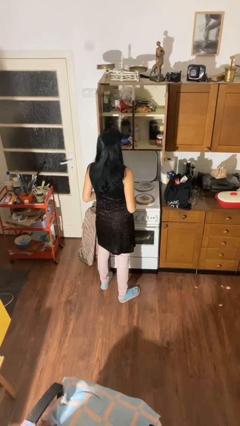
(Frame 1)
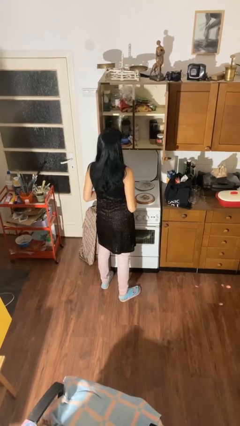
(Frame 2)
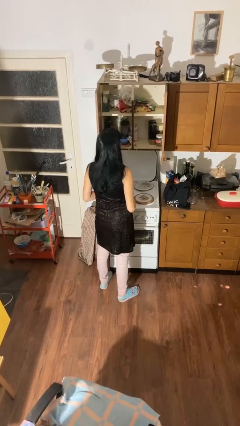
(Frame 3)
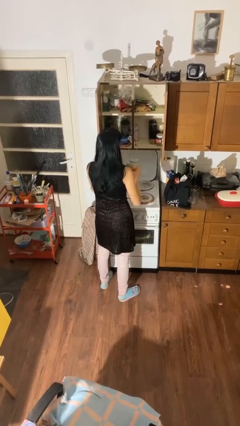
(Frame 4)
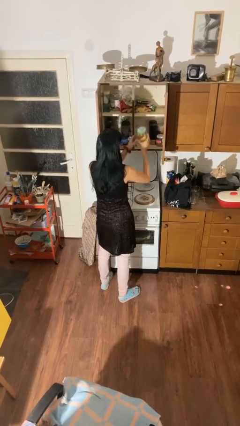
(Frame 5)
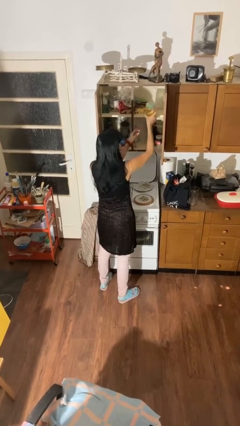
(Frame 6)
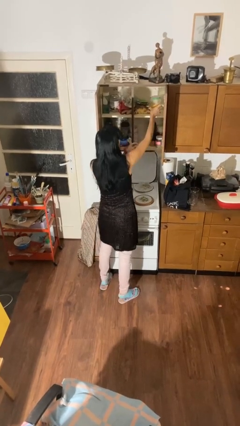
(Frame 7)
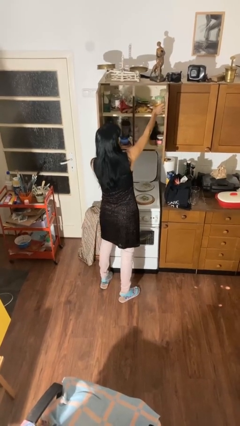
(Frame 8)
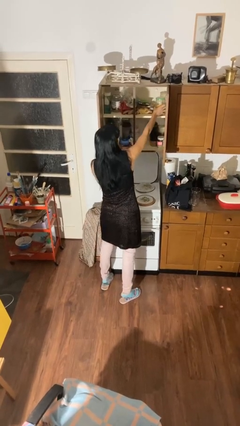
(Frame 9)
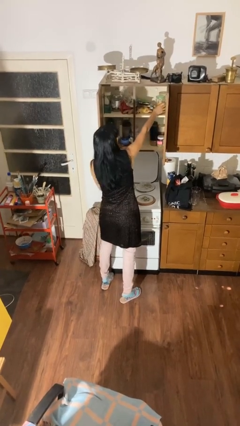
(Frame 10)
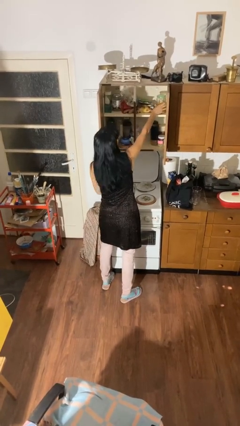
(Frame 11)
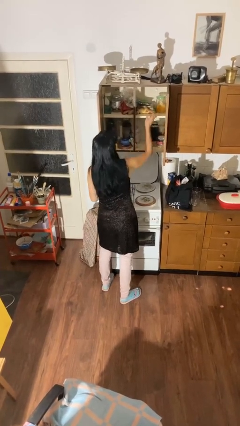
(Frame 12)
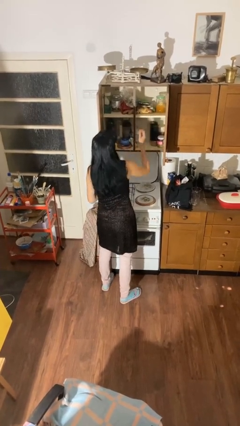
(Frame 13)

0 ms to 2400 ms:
person puts down object into cabinet

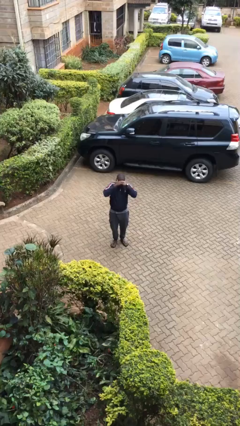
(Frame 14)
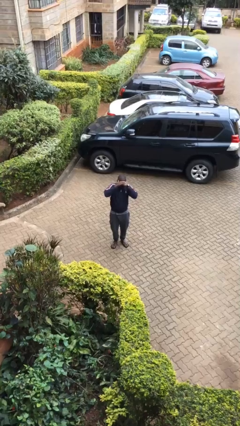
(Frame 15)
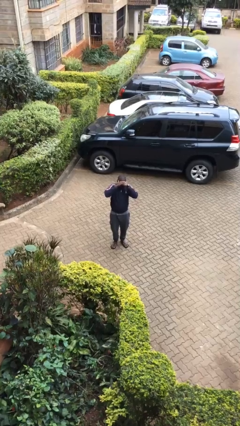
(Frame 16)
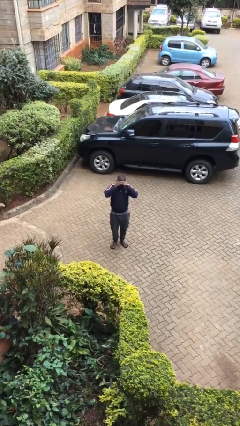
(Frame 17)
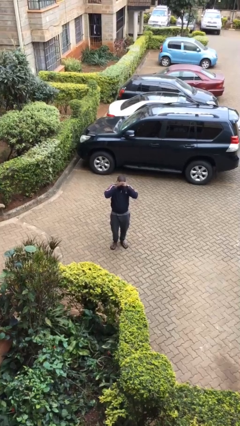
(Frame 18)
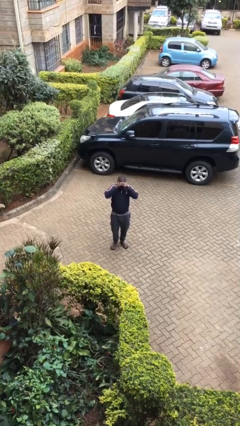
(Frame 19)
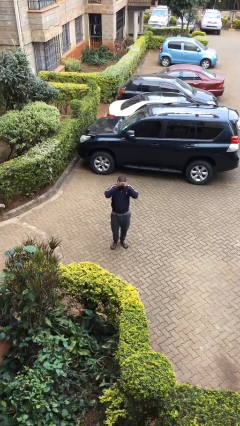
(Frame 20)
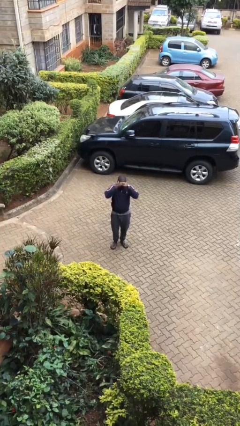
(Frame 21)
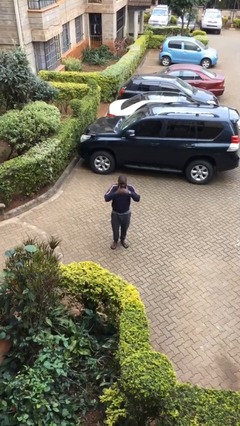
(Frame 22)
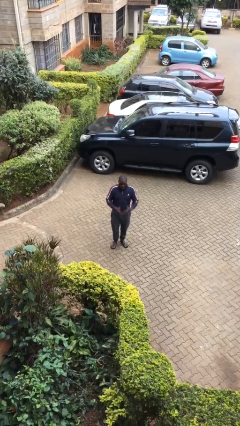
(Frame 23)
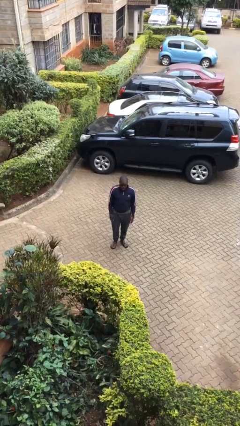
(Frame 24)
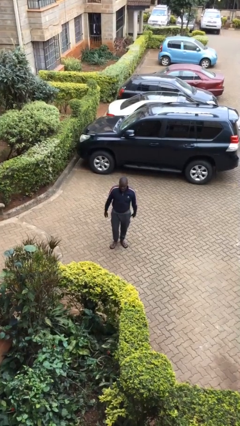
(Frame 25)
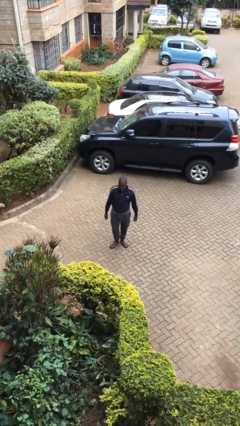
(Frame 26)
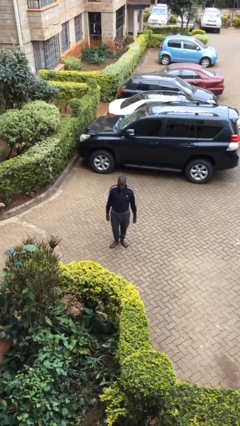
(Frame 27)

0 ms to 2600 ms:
person shades eyes

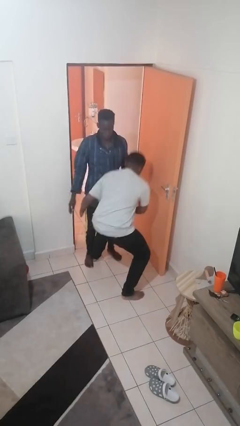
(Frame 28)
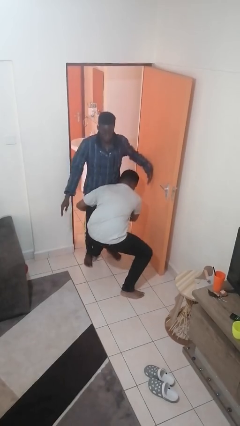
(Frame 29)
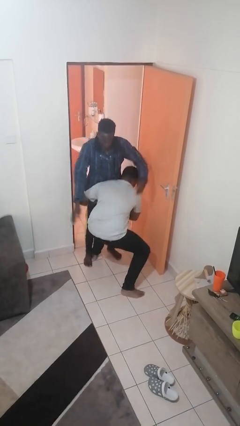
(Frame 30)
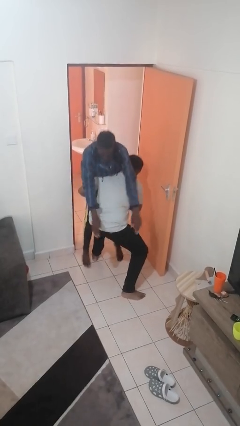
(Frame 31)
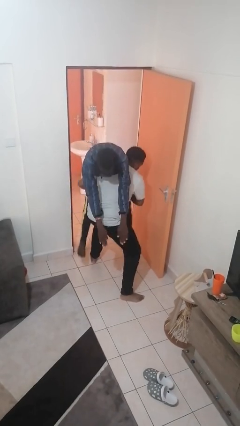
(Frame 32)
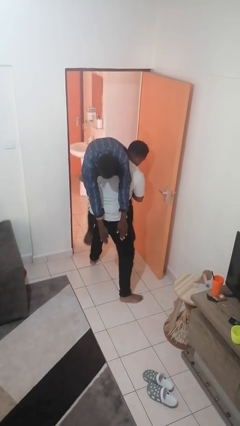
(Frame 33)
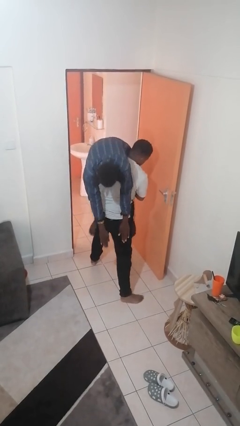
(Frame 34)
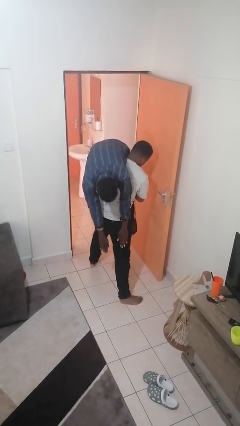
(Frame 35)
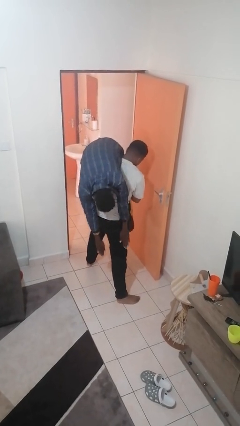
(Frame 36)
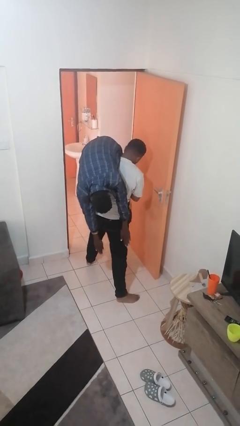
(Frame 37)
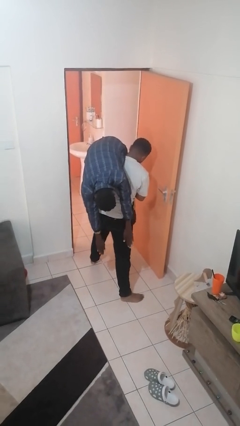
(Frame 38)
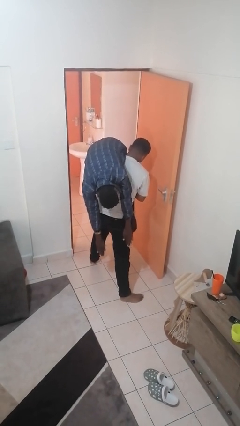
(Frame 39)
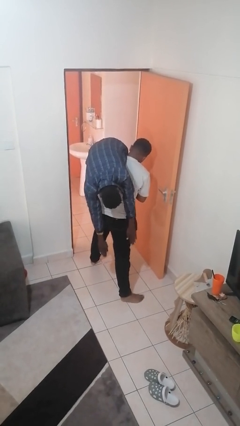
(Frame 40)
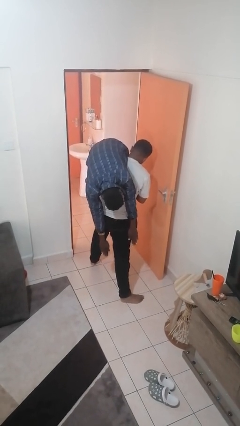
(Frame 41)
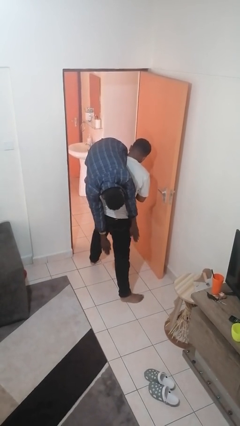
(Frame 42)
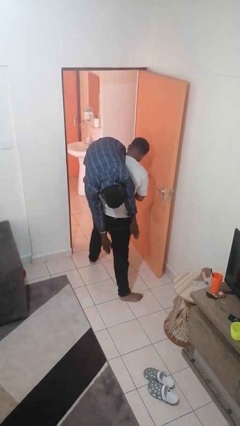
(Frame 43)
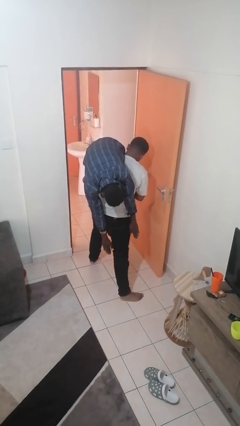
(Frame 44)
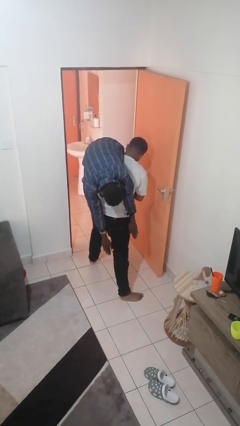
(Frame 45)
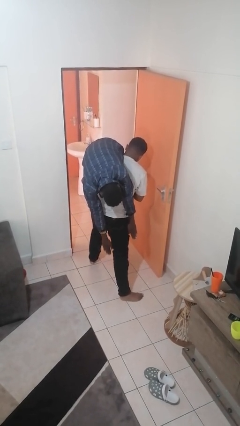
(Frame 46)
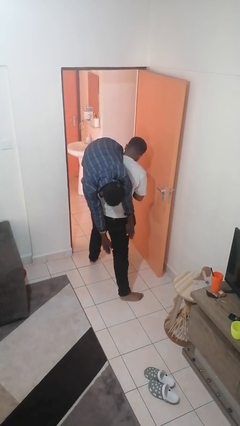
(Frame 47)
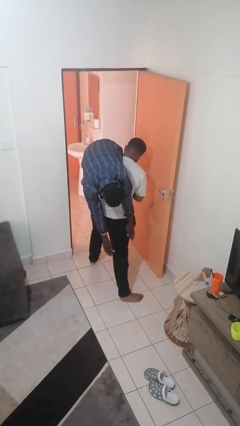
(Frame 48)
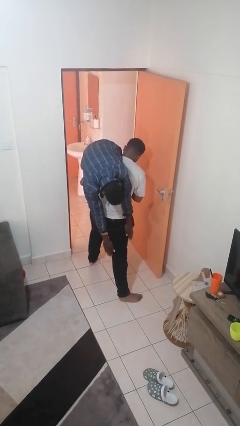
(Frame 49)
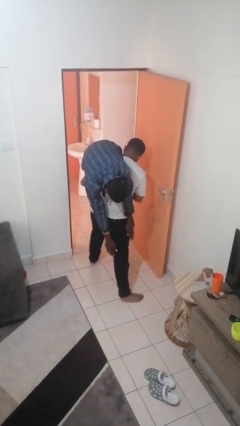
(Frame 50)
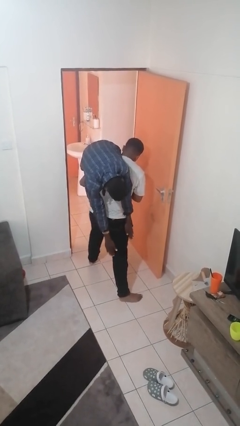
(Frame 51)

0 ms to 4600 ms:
person carries person over shoulder

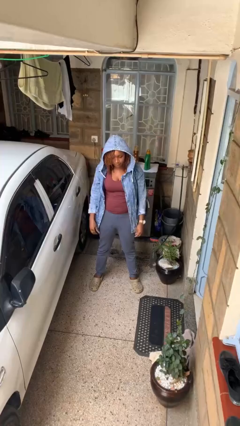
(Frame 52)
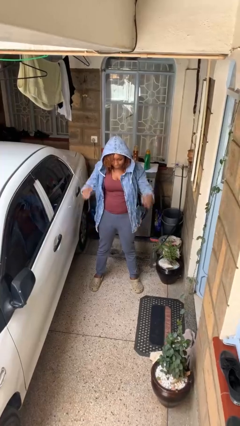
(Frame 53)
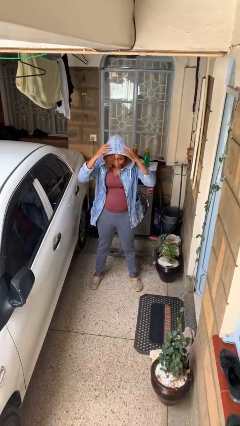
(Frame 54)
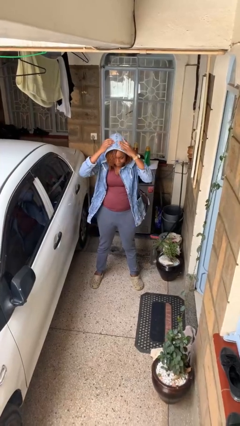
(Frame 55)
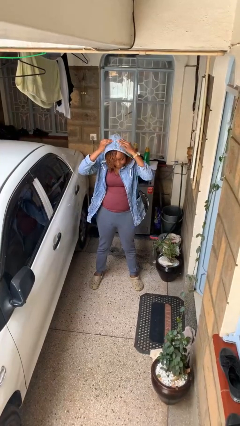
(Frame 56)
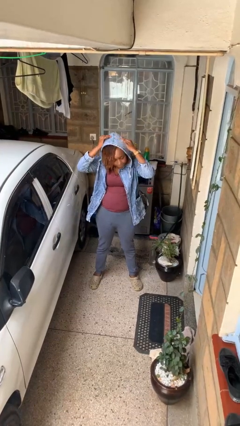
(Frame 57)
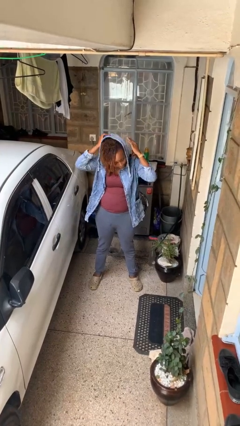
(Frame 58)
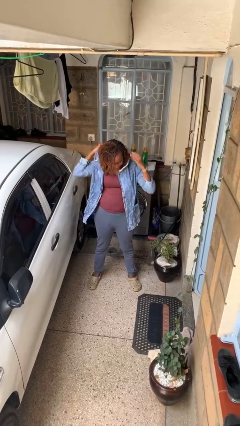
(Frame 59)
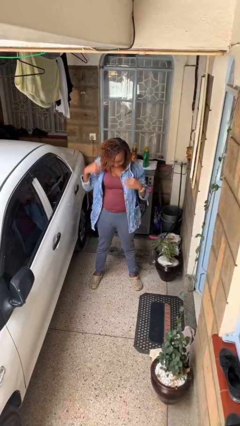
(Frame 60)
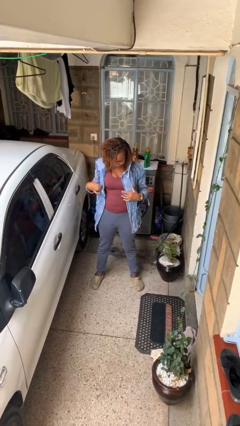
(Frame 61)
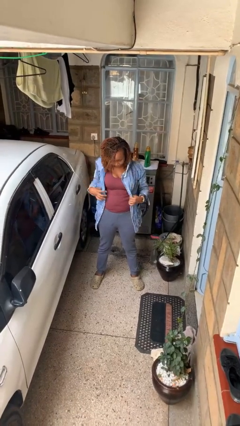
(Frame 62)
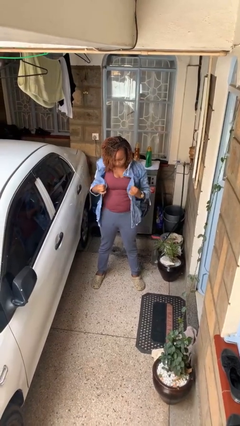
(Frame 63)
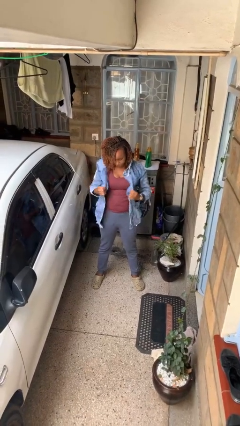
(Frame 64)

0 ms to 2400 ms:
person takes off hoodie

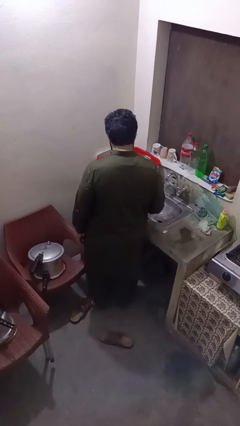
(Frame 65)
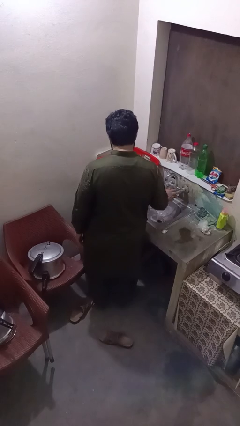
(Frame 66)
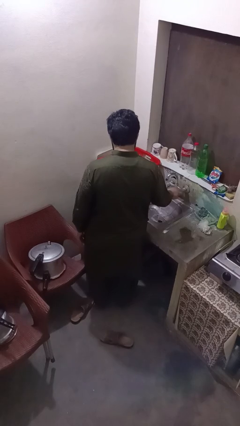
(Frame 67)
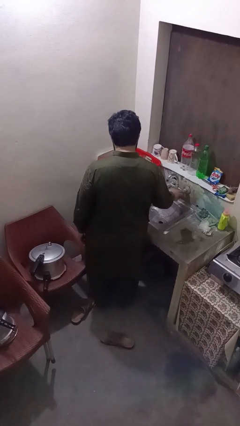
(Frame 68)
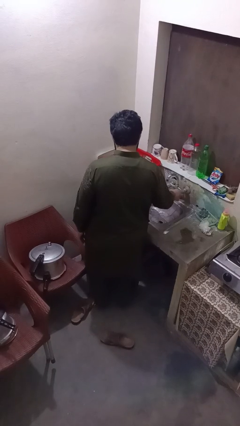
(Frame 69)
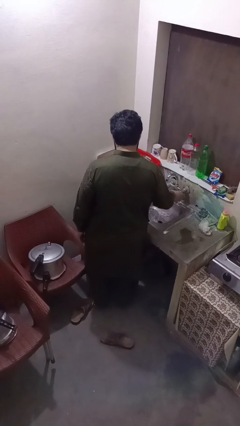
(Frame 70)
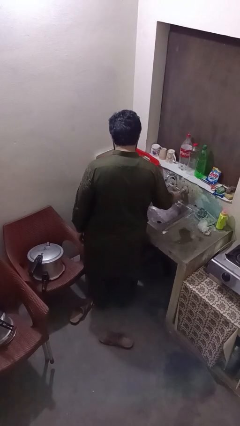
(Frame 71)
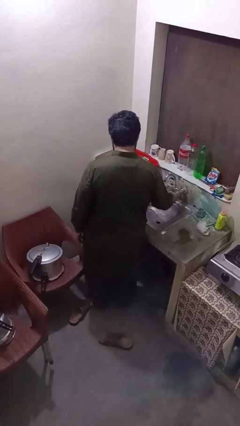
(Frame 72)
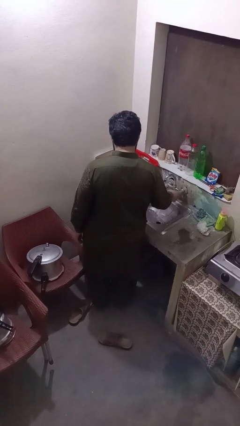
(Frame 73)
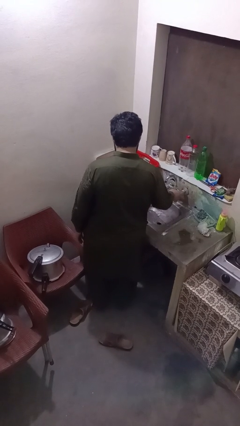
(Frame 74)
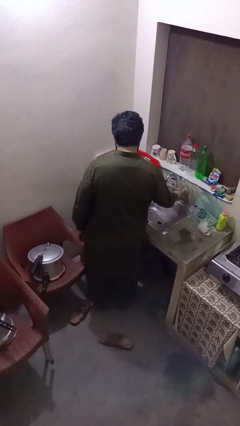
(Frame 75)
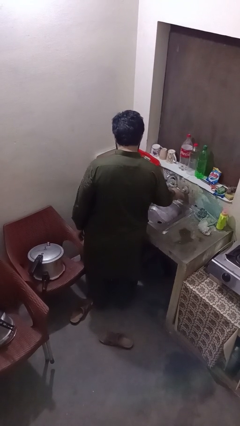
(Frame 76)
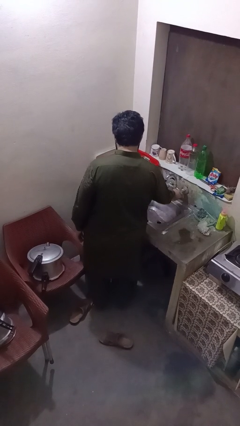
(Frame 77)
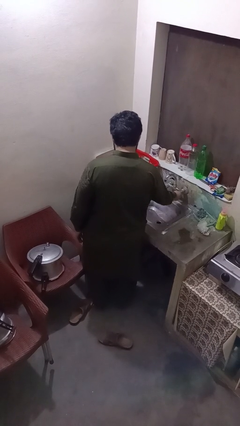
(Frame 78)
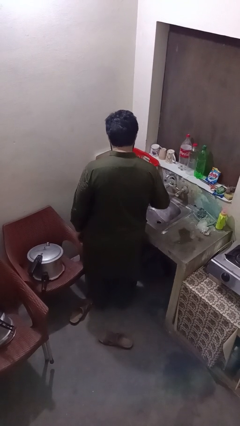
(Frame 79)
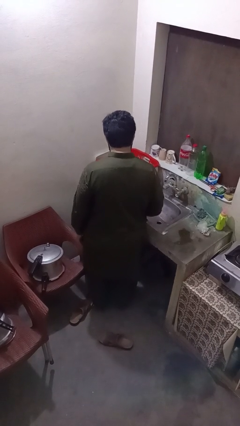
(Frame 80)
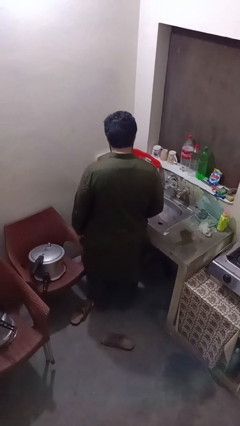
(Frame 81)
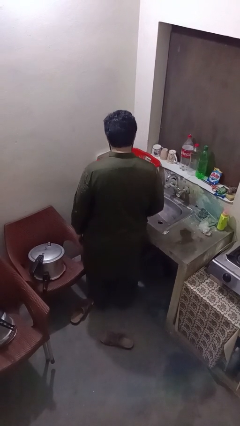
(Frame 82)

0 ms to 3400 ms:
person turns off faucet

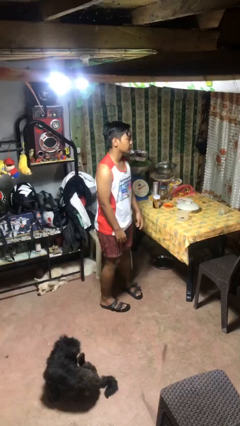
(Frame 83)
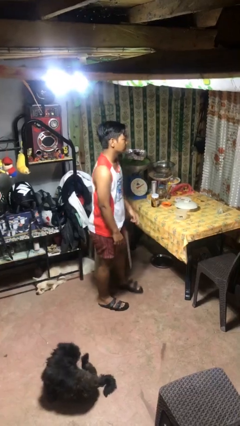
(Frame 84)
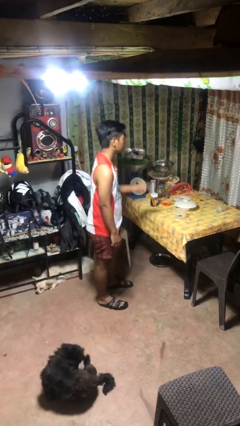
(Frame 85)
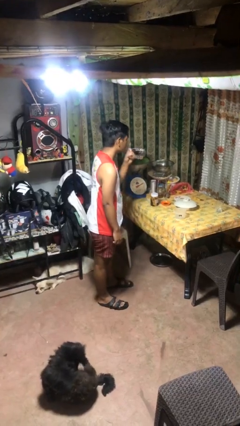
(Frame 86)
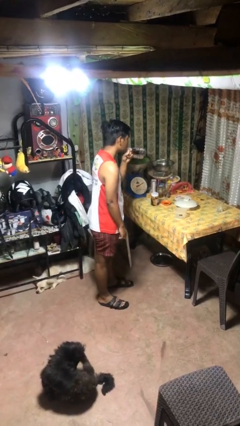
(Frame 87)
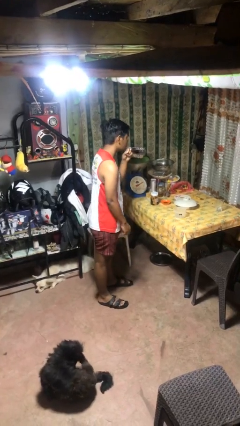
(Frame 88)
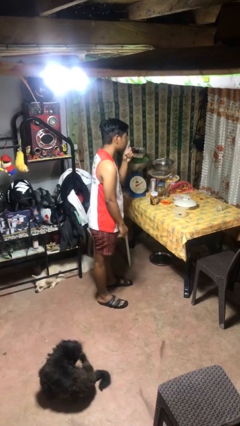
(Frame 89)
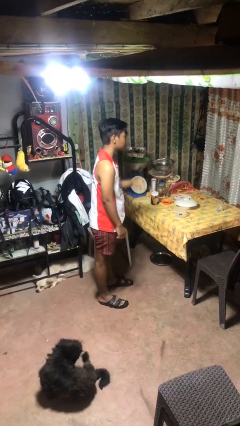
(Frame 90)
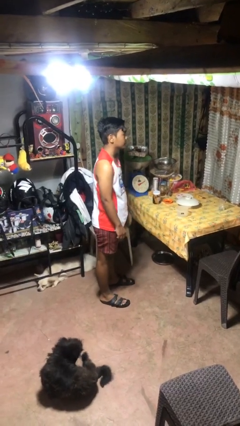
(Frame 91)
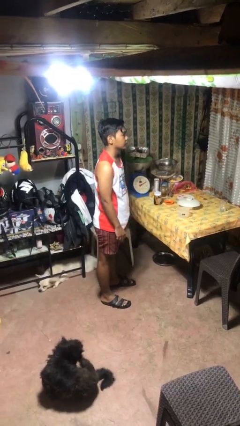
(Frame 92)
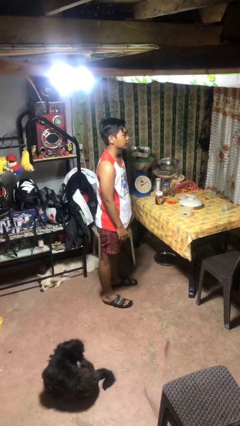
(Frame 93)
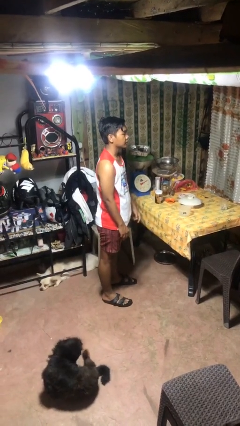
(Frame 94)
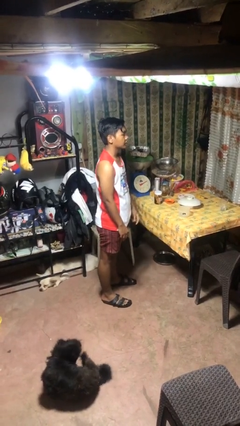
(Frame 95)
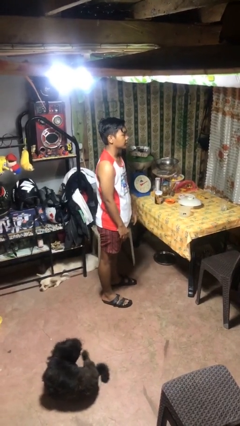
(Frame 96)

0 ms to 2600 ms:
person gestures be quiet
